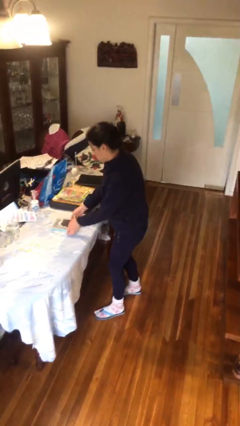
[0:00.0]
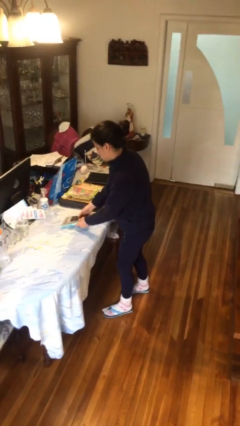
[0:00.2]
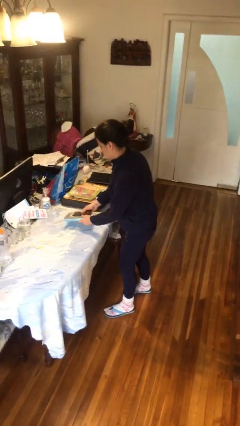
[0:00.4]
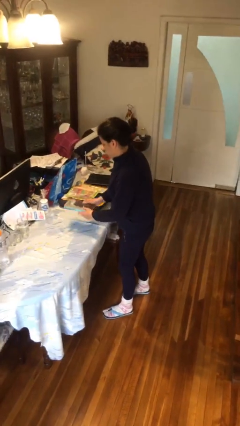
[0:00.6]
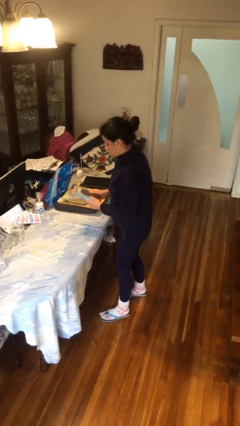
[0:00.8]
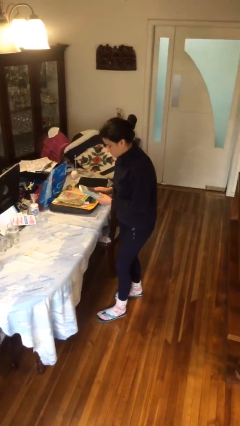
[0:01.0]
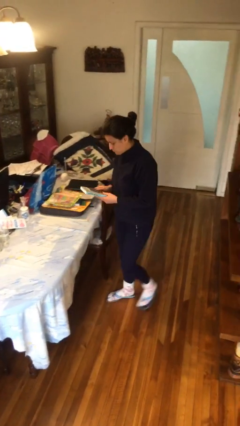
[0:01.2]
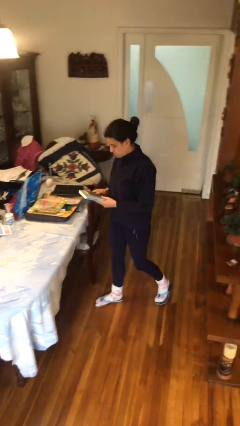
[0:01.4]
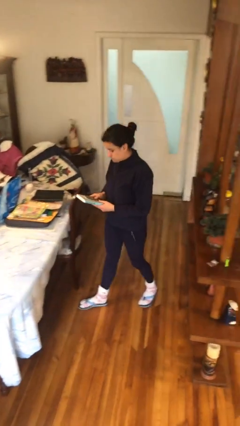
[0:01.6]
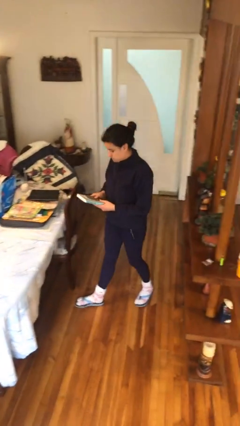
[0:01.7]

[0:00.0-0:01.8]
person picks up object from table

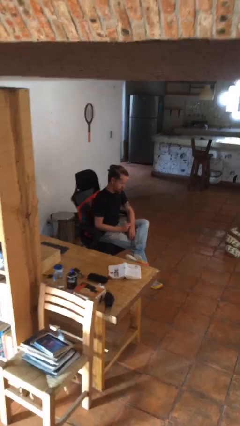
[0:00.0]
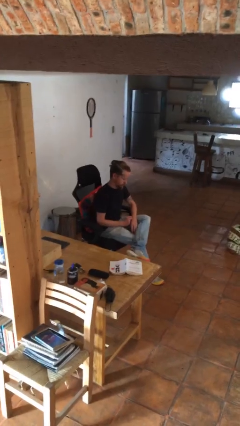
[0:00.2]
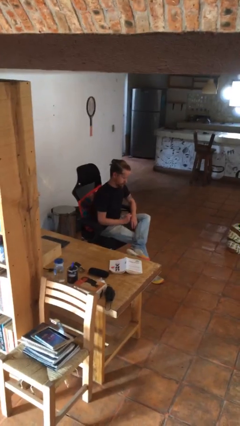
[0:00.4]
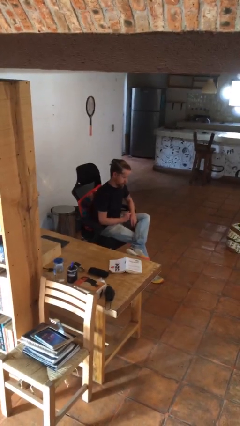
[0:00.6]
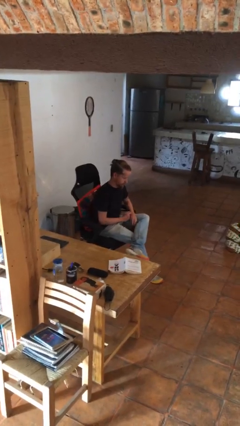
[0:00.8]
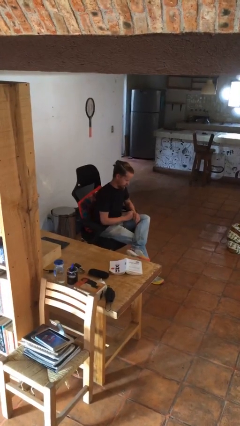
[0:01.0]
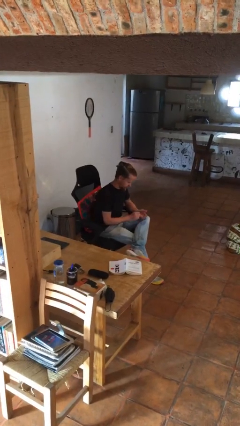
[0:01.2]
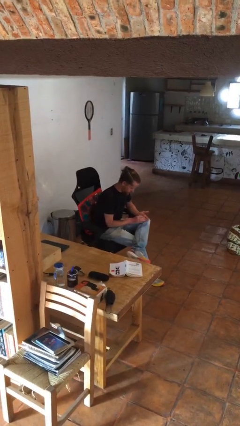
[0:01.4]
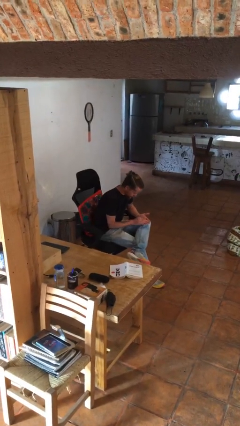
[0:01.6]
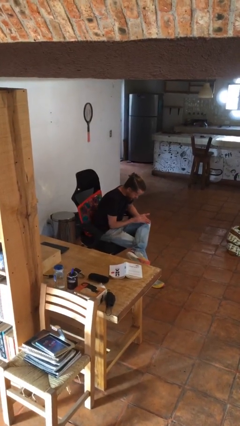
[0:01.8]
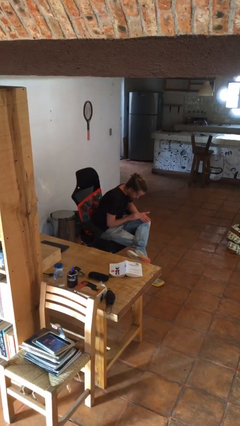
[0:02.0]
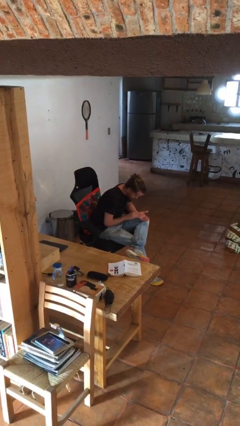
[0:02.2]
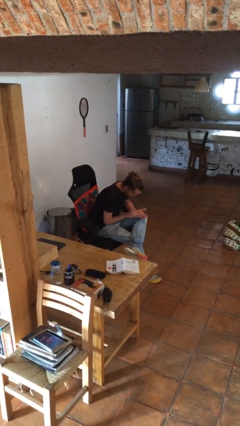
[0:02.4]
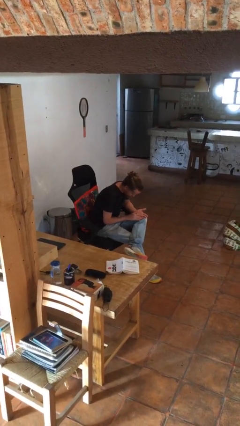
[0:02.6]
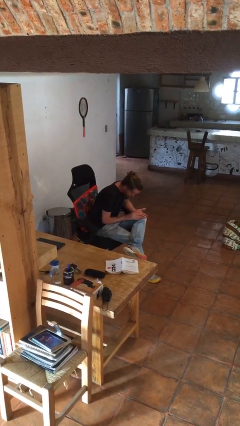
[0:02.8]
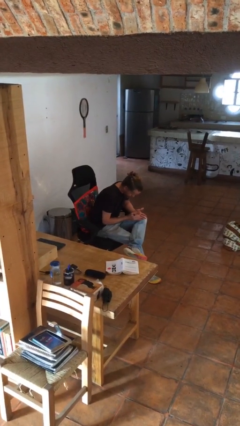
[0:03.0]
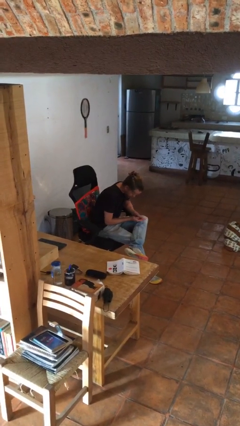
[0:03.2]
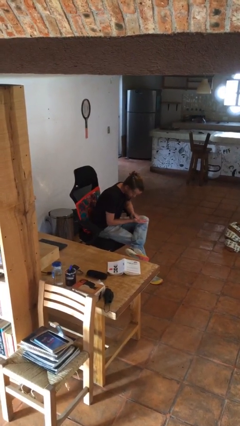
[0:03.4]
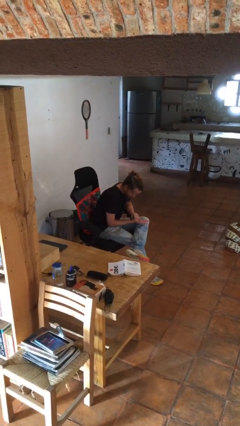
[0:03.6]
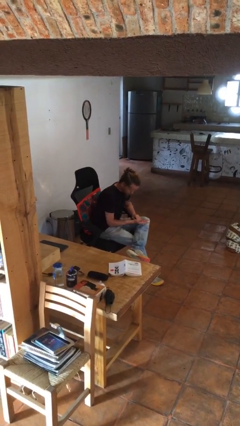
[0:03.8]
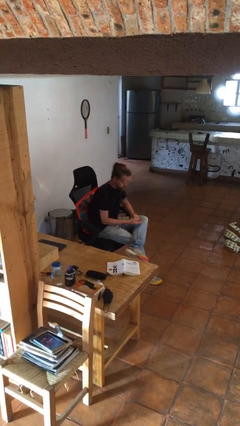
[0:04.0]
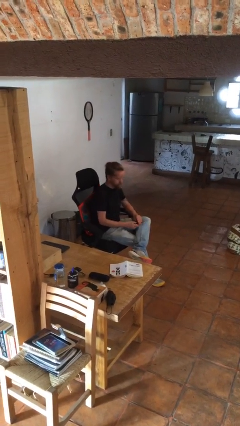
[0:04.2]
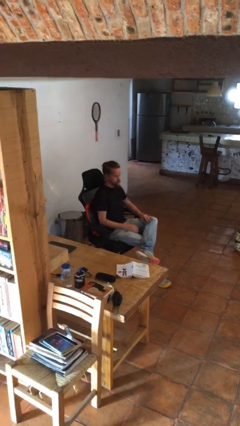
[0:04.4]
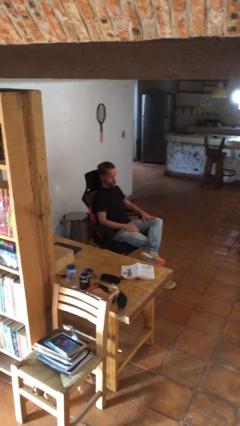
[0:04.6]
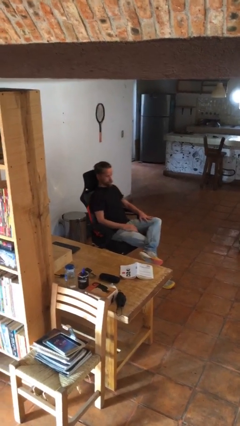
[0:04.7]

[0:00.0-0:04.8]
person looks at hands in lap

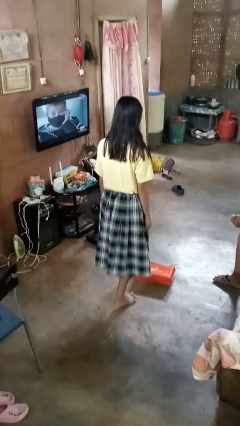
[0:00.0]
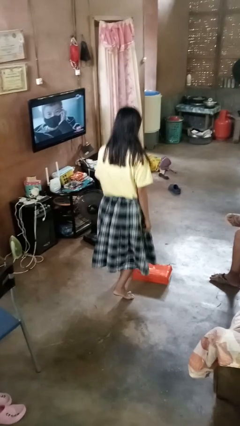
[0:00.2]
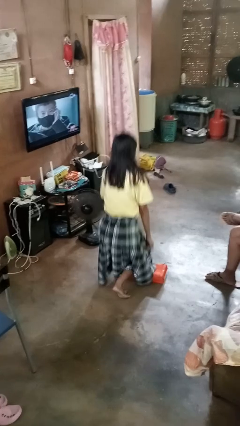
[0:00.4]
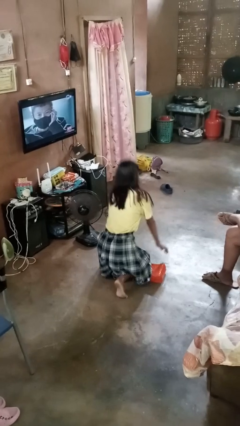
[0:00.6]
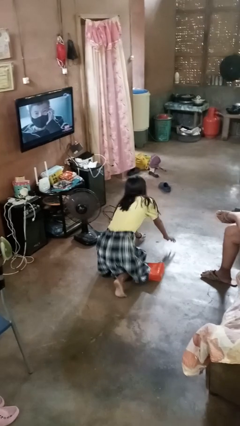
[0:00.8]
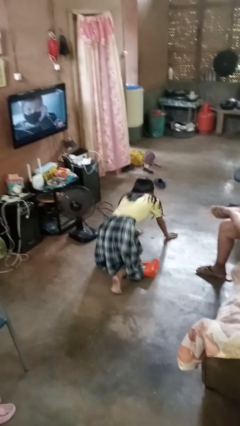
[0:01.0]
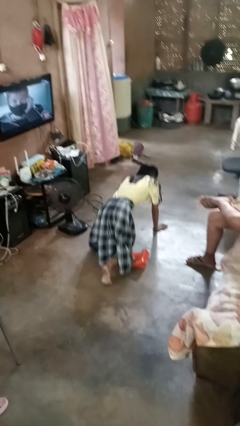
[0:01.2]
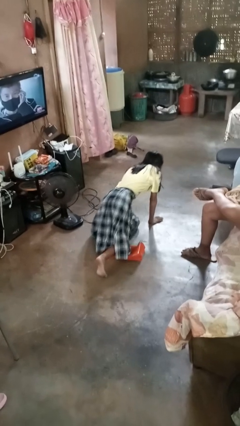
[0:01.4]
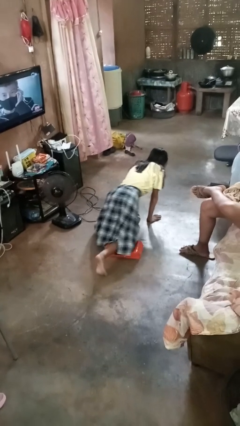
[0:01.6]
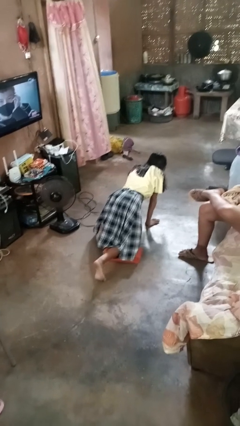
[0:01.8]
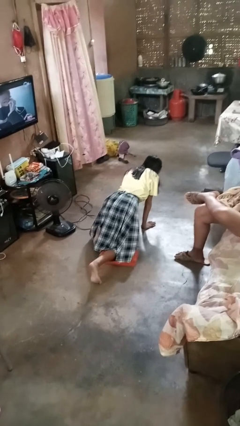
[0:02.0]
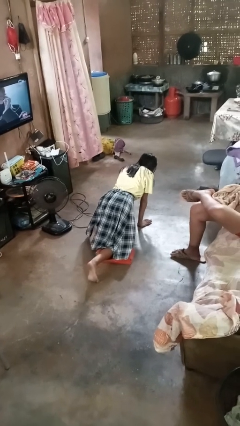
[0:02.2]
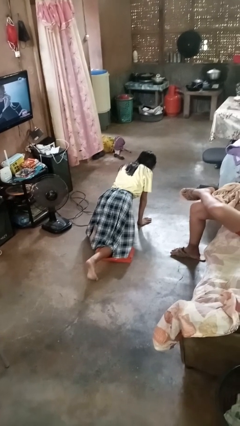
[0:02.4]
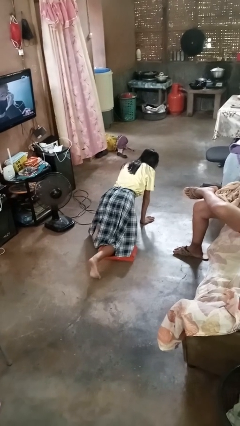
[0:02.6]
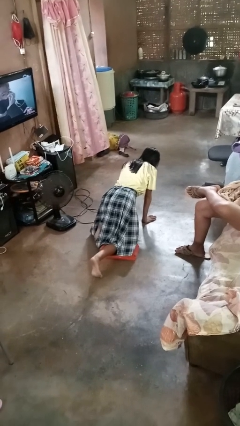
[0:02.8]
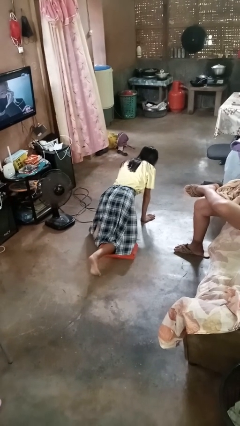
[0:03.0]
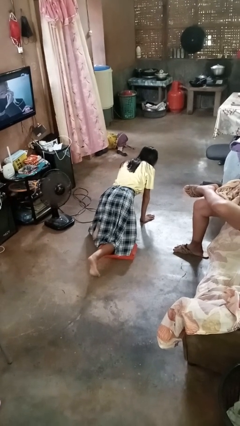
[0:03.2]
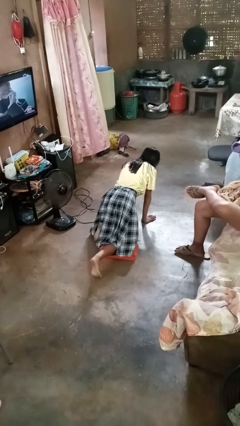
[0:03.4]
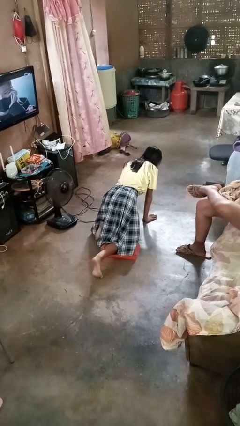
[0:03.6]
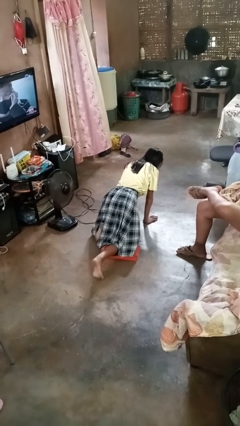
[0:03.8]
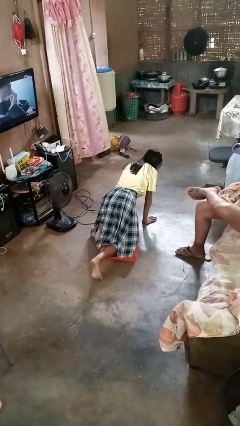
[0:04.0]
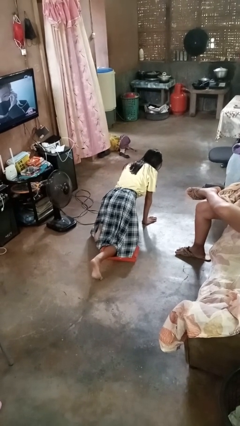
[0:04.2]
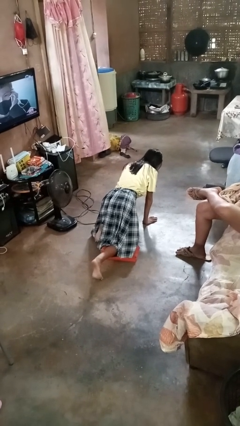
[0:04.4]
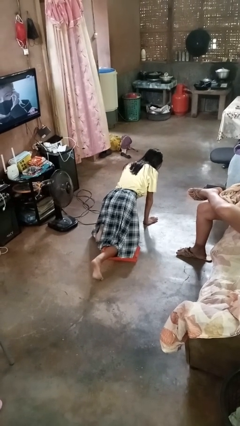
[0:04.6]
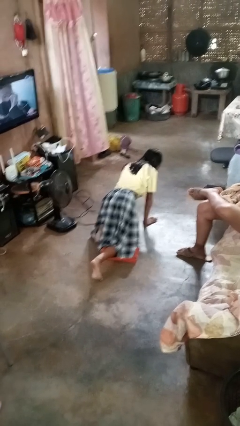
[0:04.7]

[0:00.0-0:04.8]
person trips on object on floor

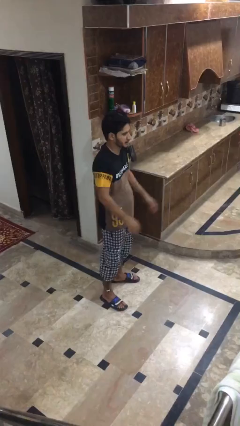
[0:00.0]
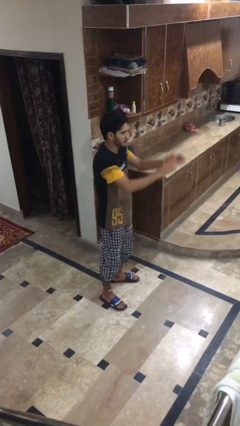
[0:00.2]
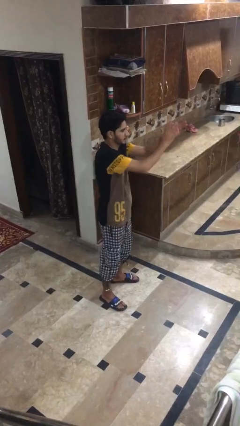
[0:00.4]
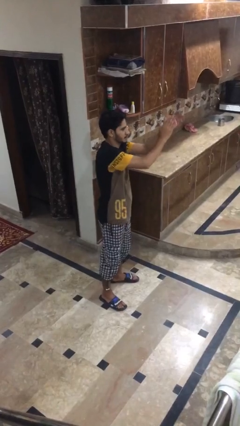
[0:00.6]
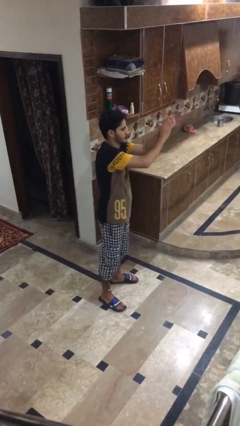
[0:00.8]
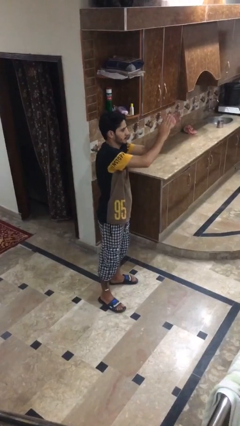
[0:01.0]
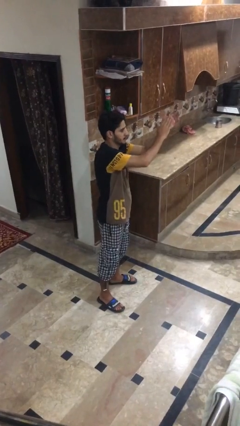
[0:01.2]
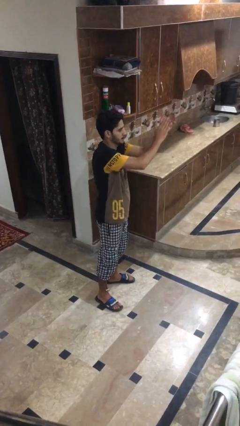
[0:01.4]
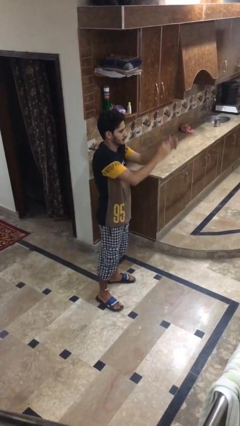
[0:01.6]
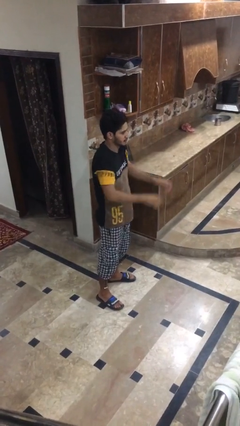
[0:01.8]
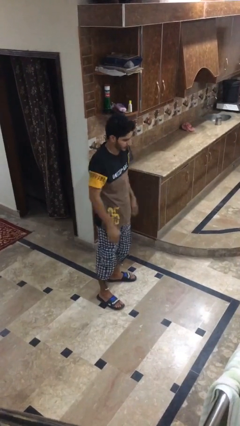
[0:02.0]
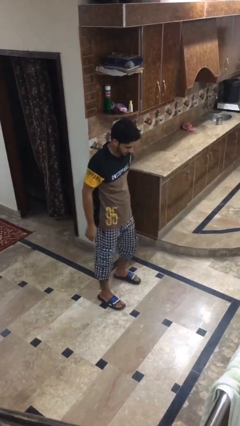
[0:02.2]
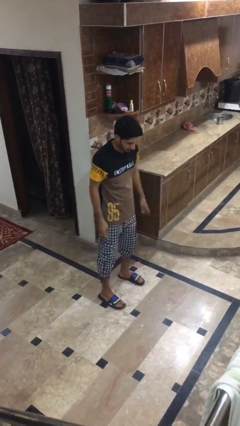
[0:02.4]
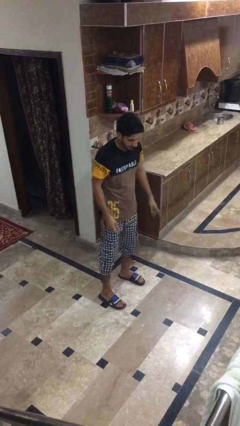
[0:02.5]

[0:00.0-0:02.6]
person claps hands

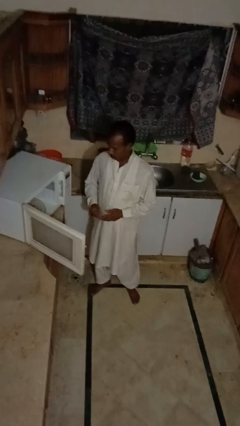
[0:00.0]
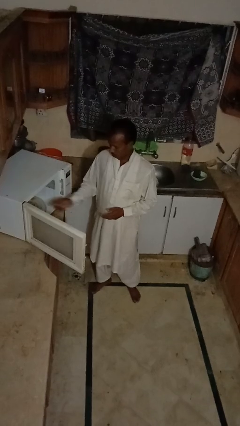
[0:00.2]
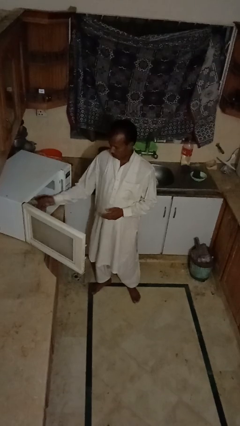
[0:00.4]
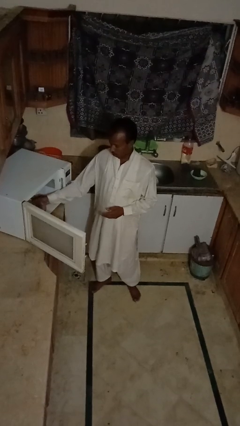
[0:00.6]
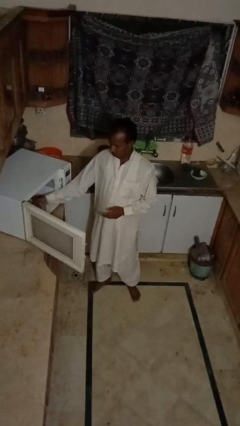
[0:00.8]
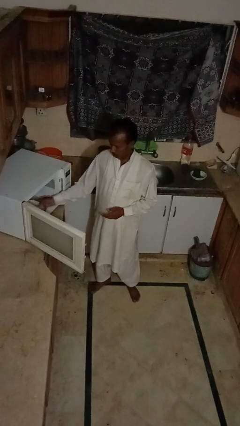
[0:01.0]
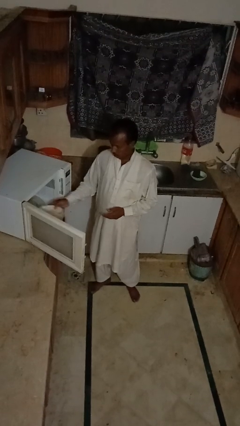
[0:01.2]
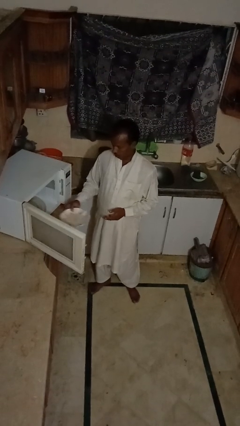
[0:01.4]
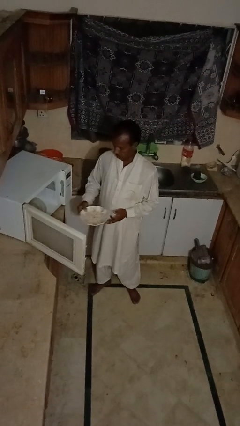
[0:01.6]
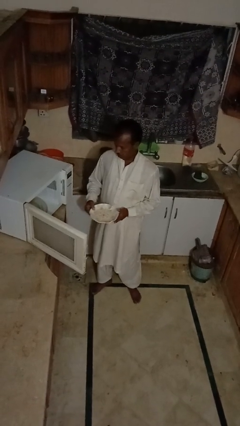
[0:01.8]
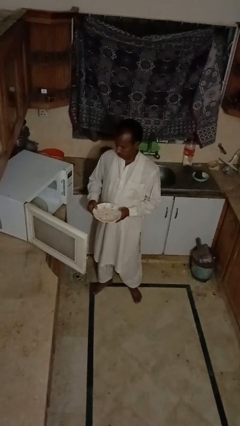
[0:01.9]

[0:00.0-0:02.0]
person takes object from microwave

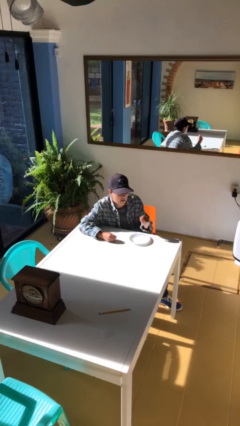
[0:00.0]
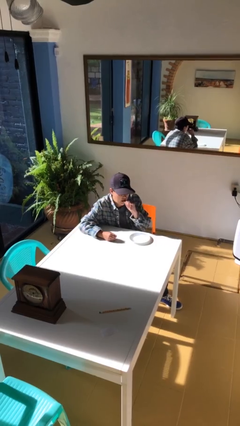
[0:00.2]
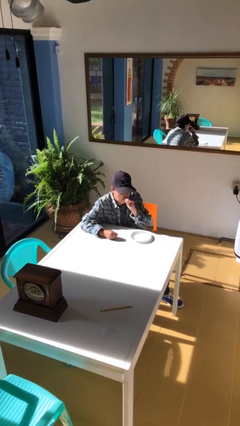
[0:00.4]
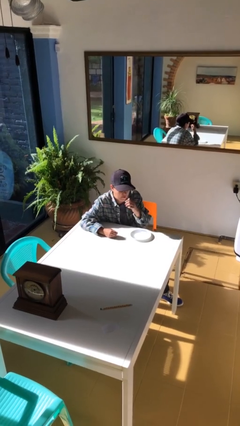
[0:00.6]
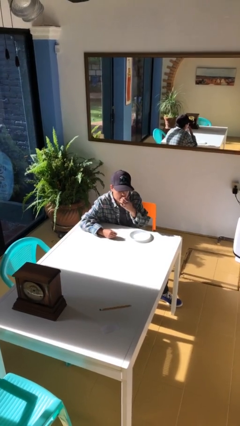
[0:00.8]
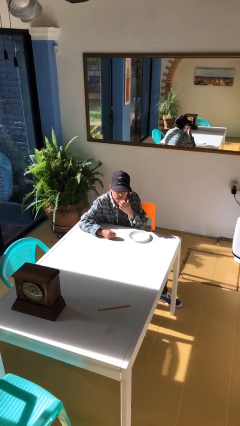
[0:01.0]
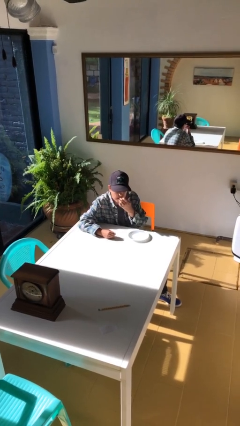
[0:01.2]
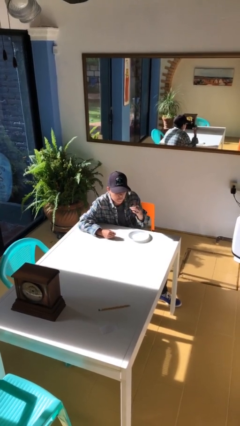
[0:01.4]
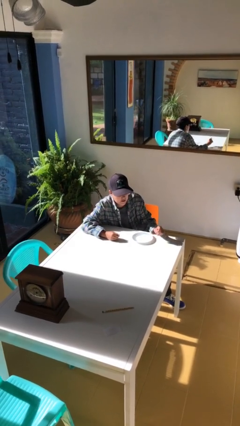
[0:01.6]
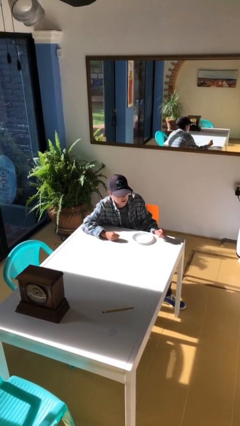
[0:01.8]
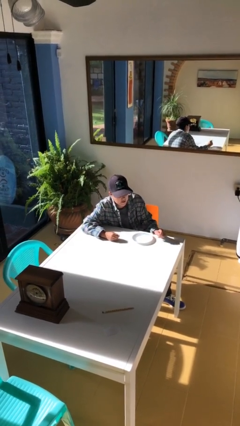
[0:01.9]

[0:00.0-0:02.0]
person licks fingers
